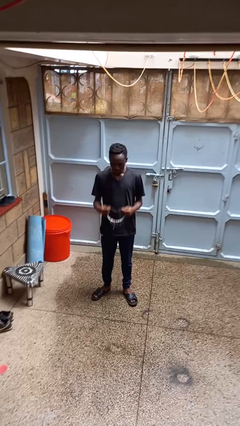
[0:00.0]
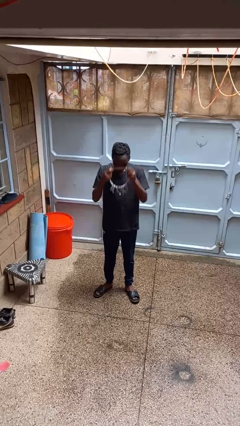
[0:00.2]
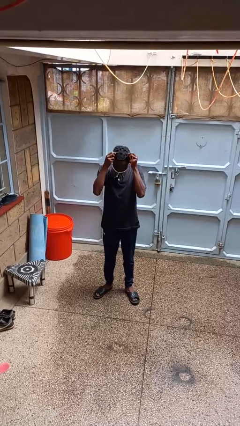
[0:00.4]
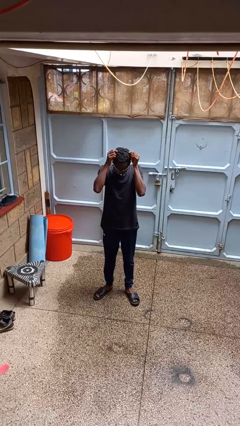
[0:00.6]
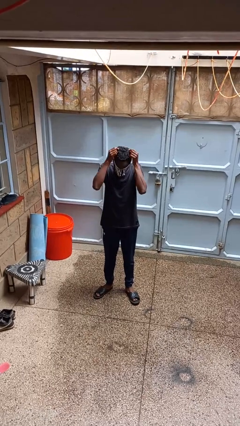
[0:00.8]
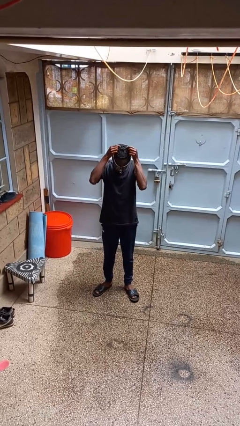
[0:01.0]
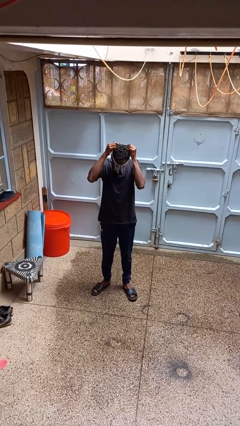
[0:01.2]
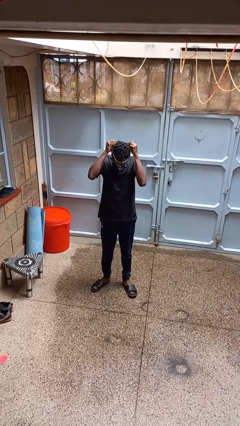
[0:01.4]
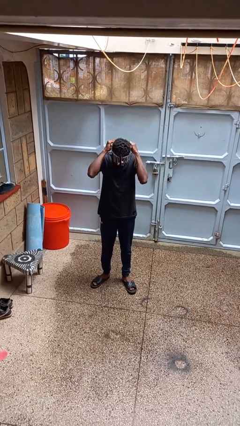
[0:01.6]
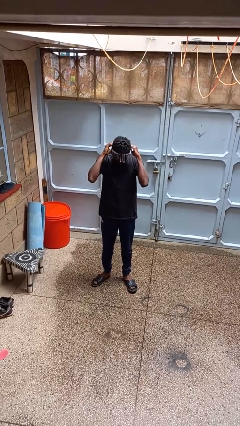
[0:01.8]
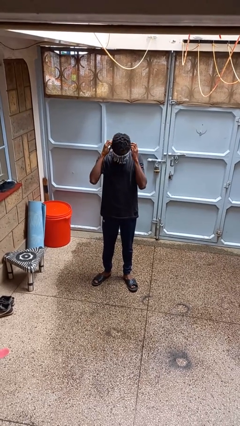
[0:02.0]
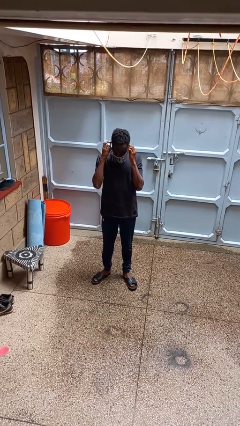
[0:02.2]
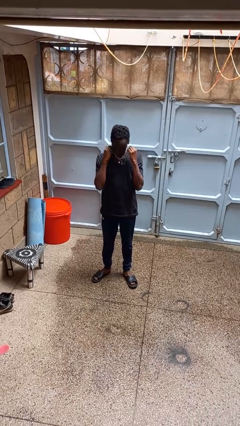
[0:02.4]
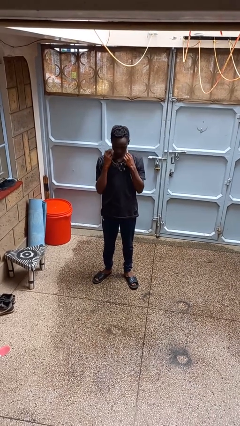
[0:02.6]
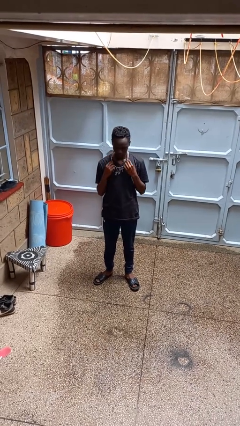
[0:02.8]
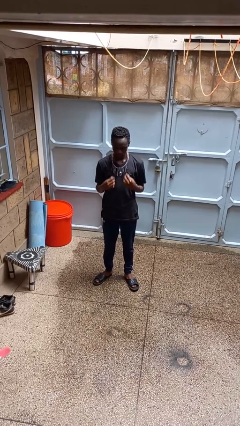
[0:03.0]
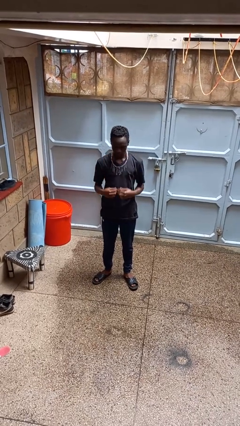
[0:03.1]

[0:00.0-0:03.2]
person puts on necklace

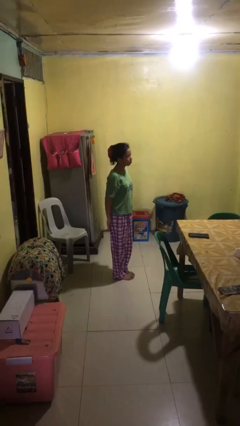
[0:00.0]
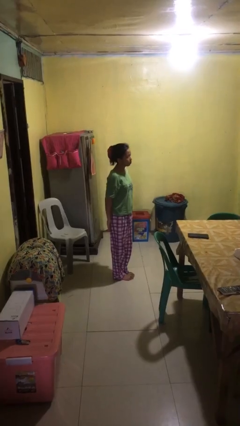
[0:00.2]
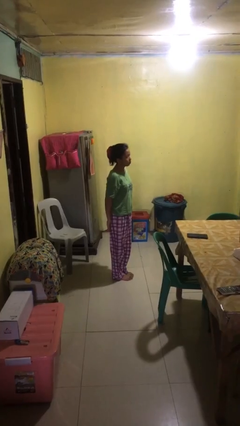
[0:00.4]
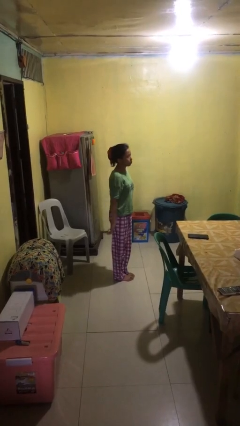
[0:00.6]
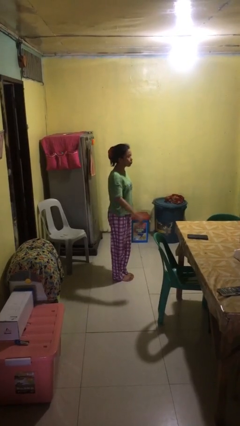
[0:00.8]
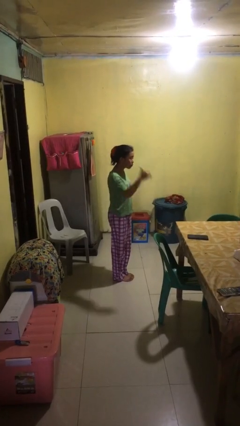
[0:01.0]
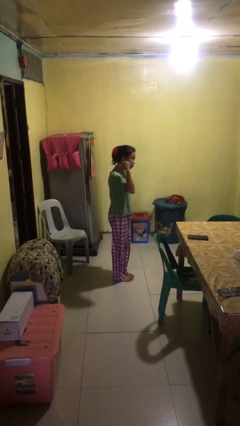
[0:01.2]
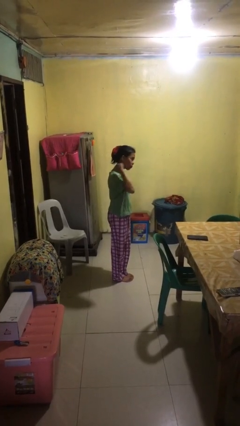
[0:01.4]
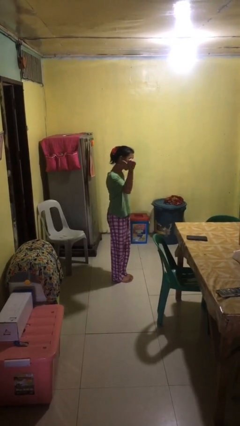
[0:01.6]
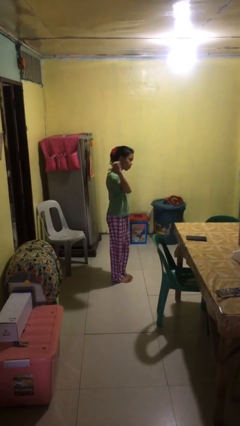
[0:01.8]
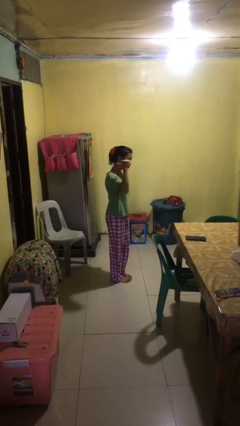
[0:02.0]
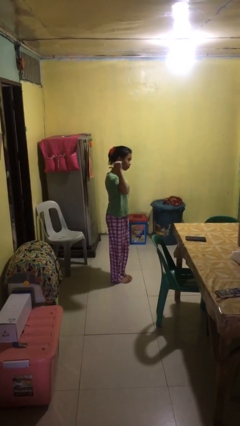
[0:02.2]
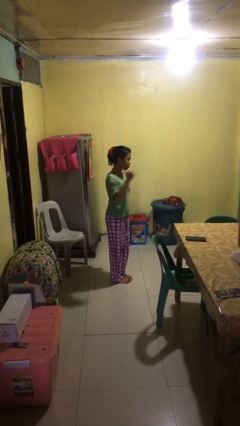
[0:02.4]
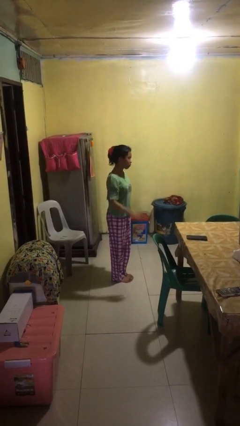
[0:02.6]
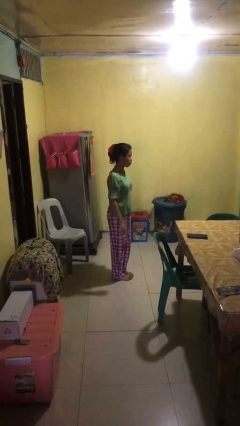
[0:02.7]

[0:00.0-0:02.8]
person gestures behind me

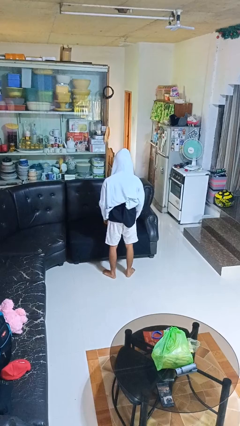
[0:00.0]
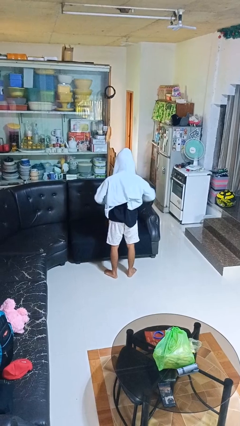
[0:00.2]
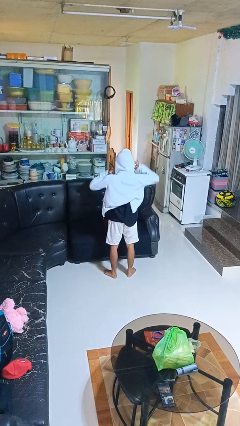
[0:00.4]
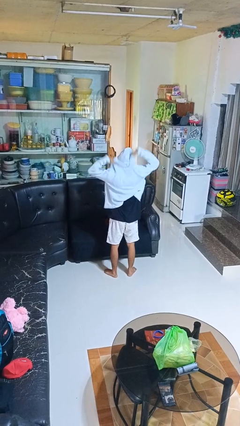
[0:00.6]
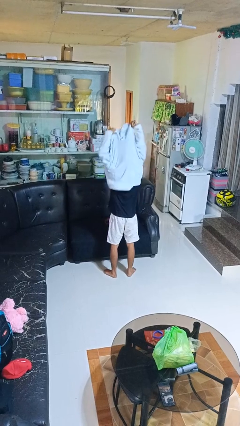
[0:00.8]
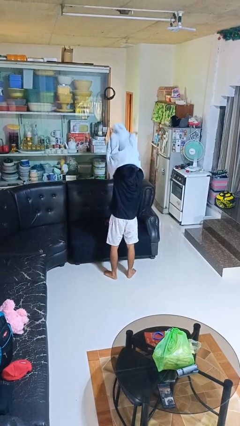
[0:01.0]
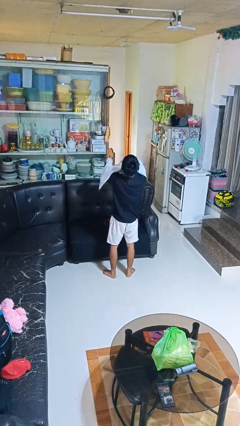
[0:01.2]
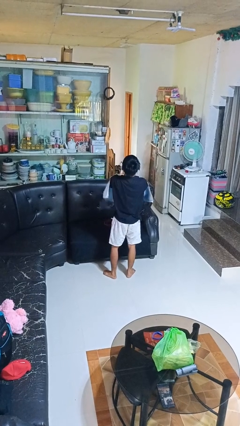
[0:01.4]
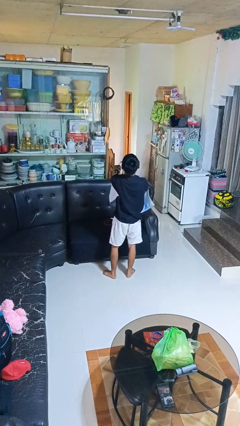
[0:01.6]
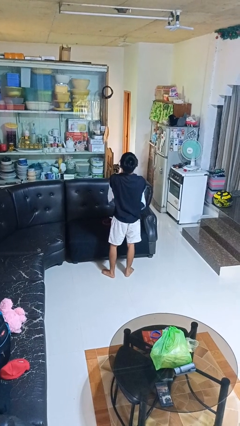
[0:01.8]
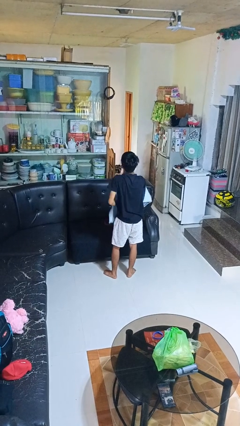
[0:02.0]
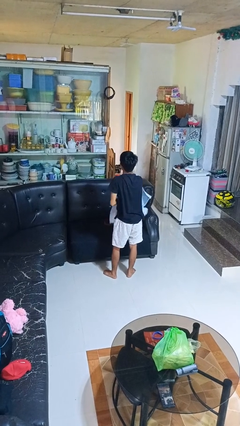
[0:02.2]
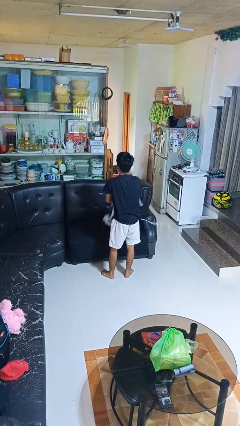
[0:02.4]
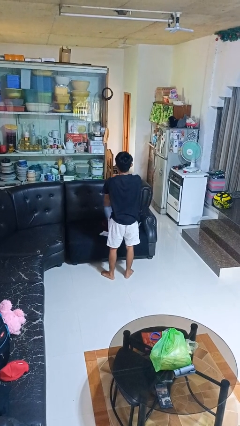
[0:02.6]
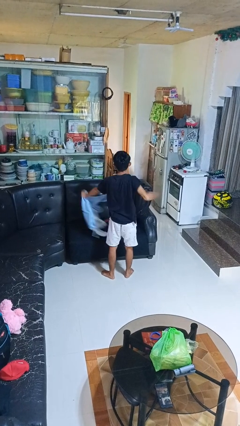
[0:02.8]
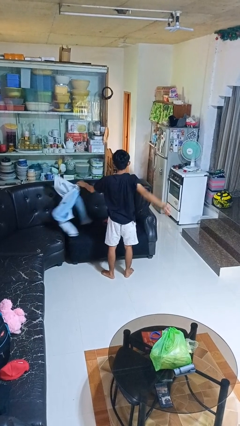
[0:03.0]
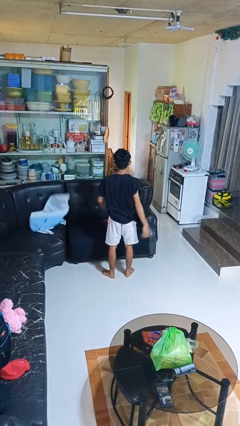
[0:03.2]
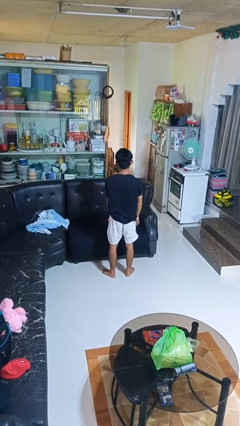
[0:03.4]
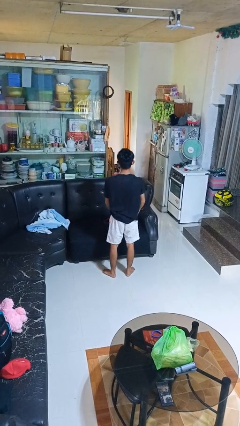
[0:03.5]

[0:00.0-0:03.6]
person takes off hoodie

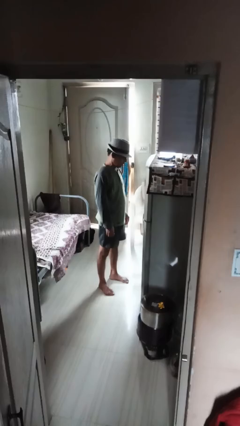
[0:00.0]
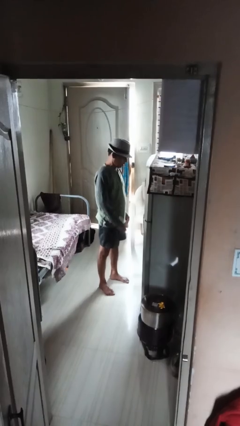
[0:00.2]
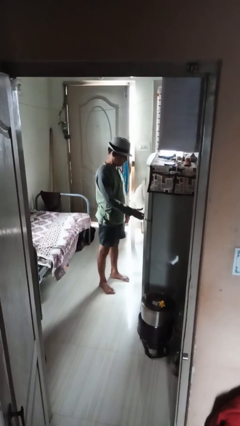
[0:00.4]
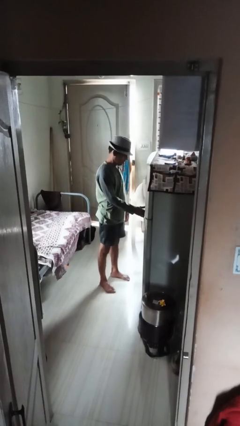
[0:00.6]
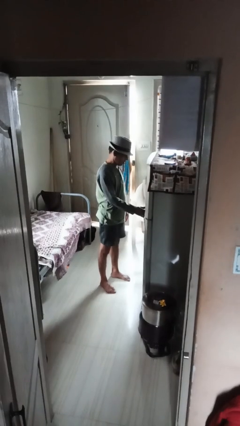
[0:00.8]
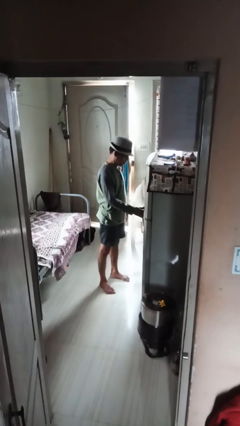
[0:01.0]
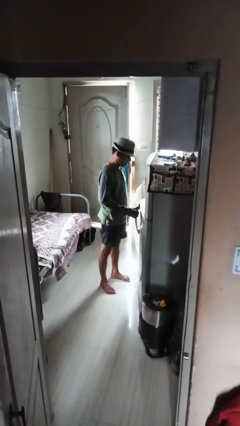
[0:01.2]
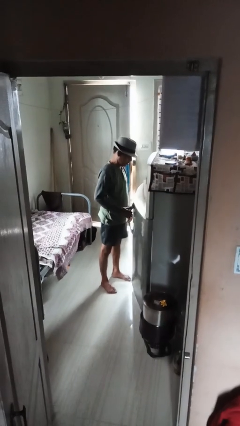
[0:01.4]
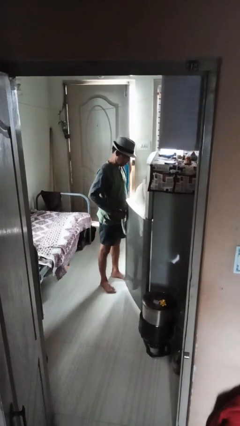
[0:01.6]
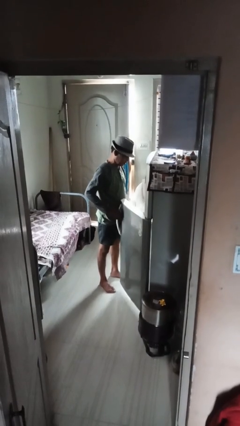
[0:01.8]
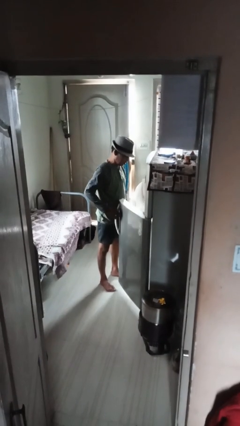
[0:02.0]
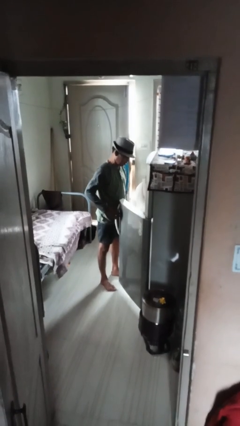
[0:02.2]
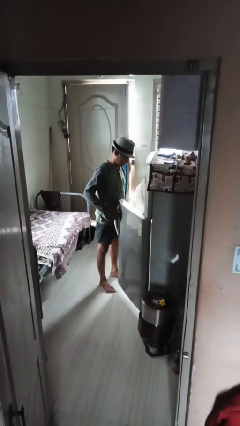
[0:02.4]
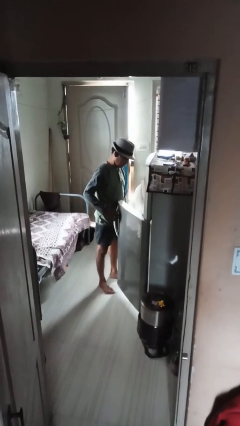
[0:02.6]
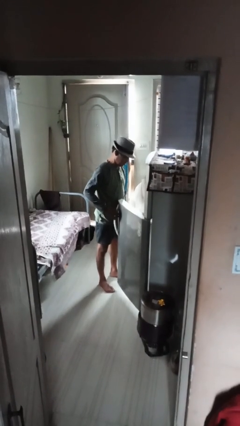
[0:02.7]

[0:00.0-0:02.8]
person opens refrigerator

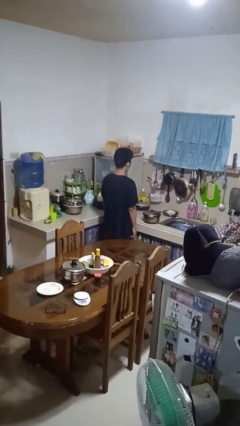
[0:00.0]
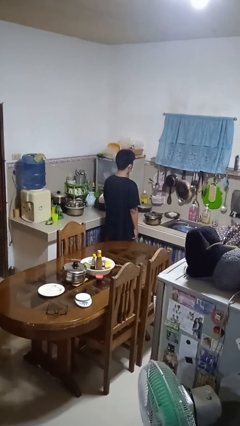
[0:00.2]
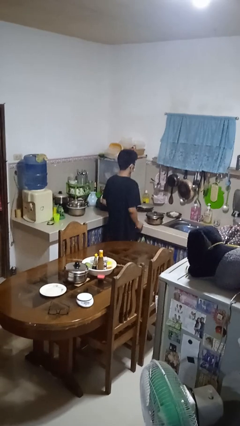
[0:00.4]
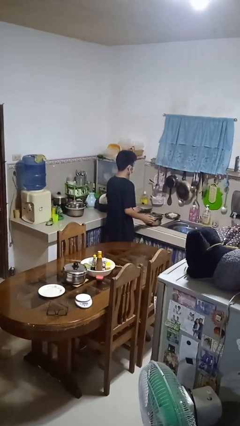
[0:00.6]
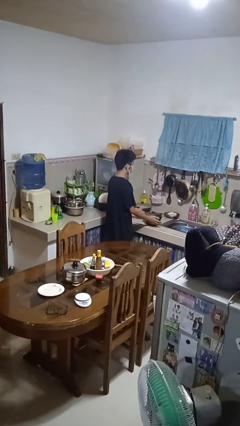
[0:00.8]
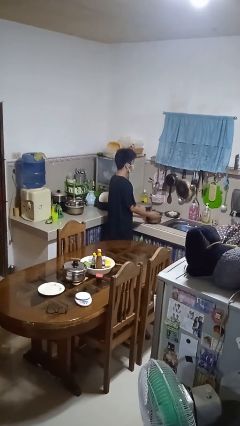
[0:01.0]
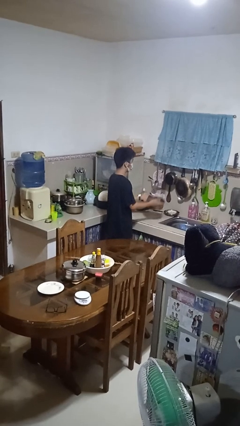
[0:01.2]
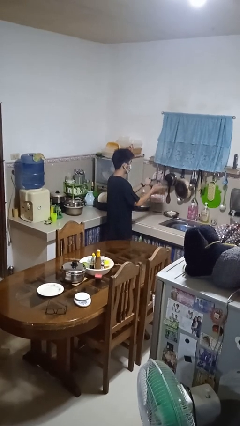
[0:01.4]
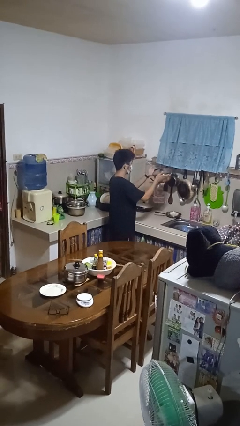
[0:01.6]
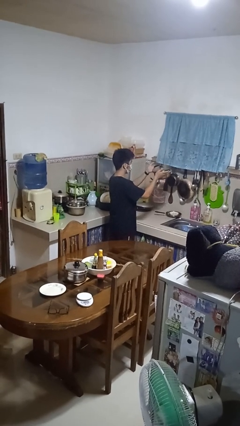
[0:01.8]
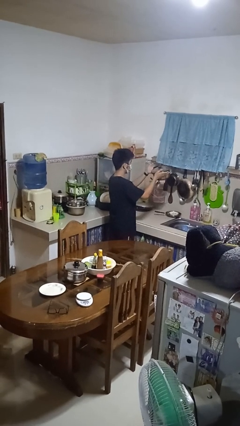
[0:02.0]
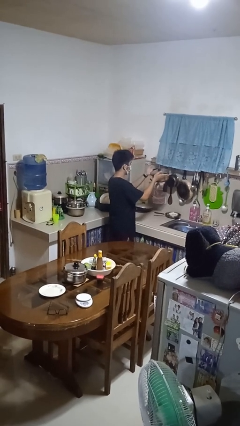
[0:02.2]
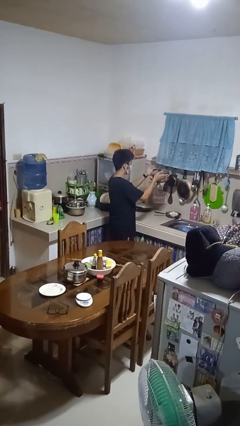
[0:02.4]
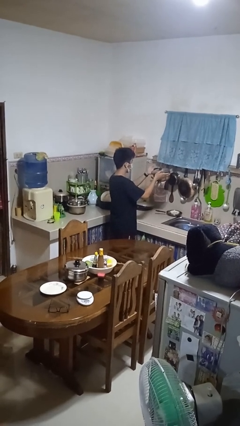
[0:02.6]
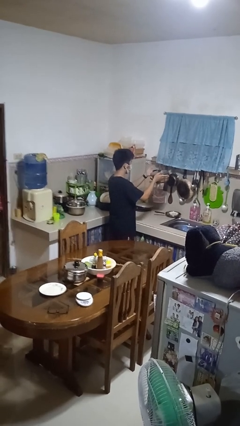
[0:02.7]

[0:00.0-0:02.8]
person picks up object from countertop

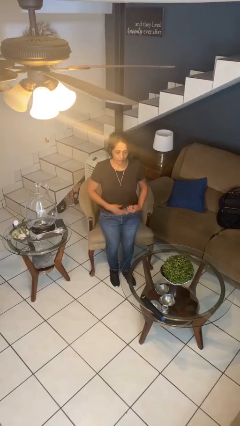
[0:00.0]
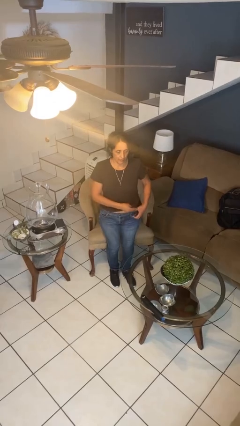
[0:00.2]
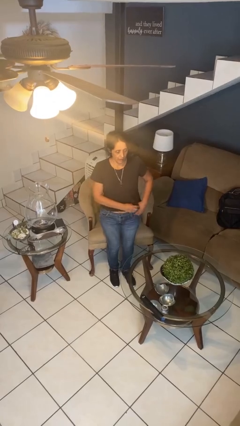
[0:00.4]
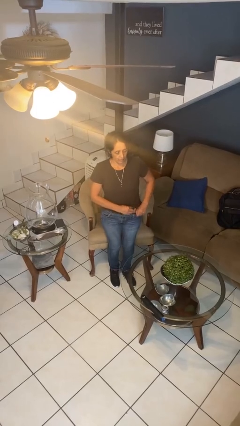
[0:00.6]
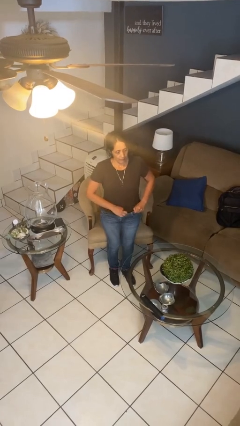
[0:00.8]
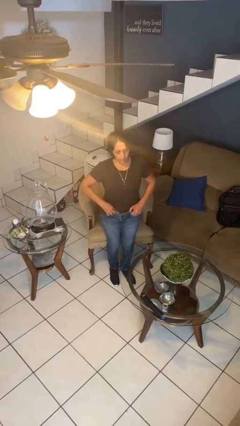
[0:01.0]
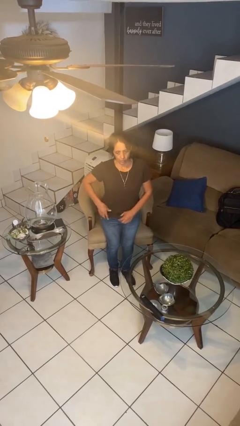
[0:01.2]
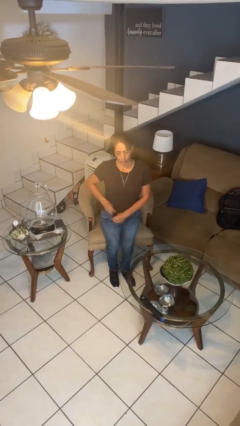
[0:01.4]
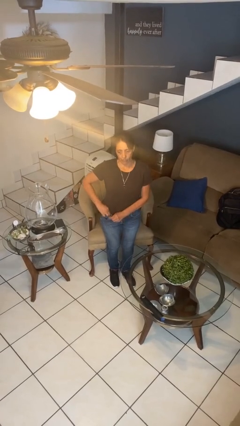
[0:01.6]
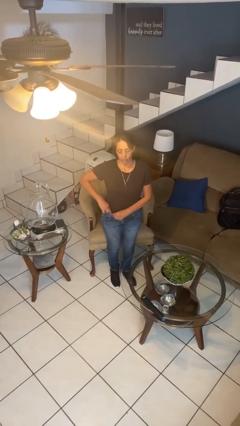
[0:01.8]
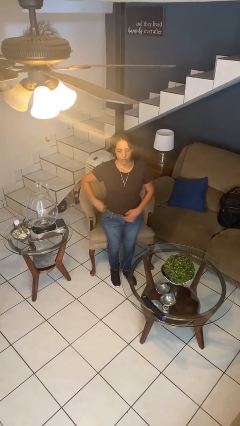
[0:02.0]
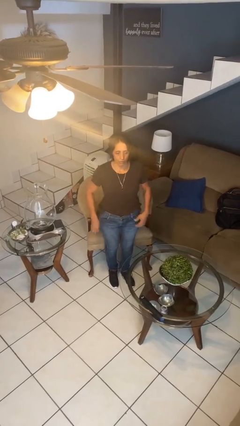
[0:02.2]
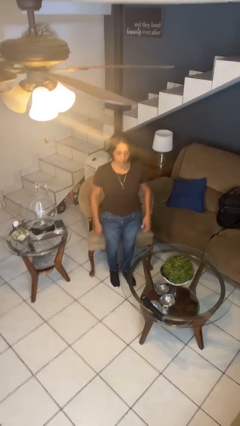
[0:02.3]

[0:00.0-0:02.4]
person tucks in shirt
